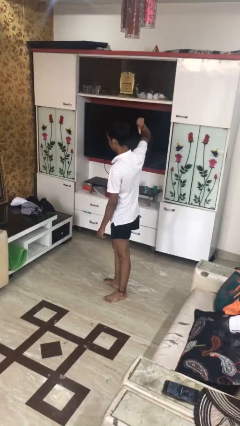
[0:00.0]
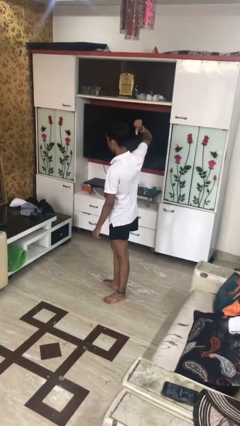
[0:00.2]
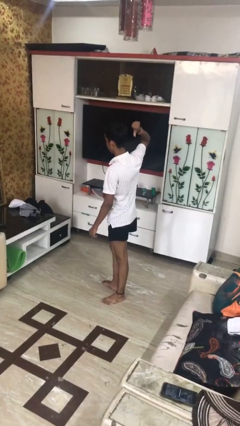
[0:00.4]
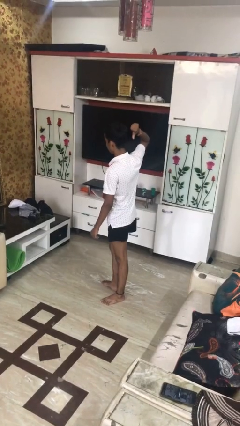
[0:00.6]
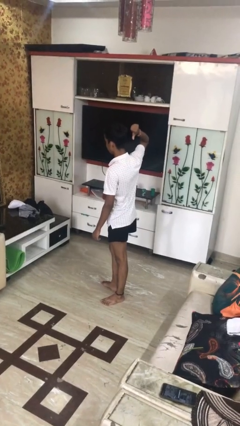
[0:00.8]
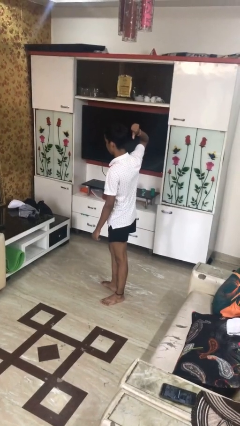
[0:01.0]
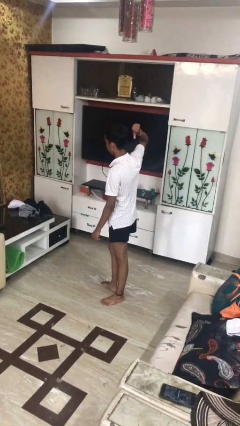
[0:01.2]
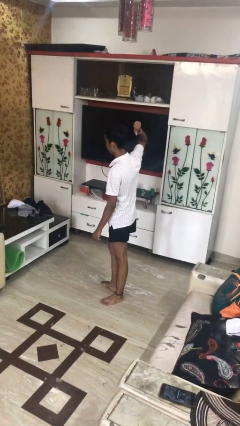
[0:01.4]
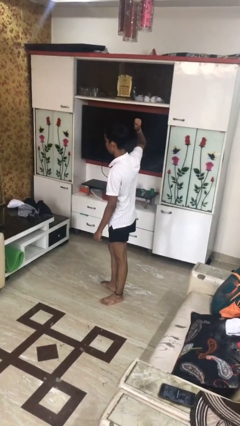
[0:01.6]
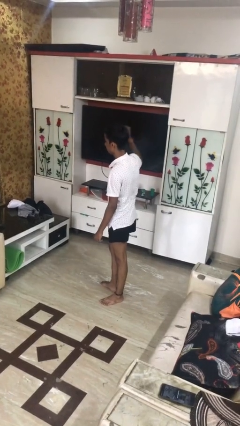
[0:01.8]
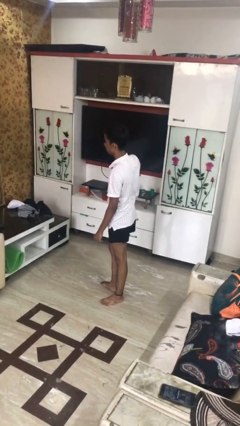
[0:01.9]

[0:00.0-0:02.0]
person gestures behind me

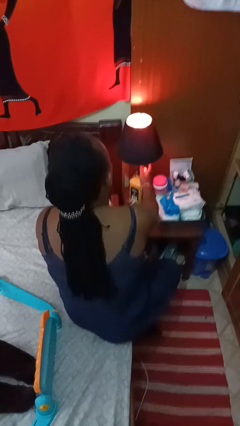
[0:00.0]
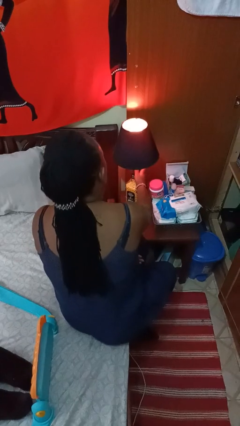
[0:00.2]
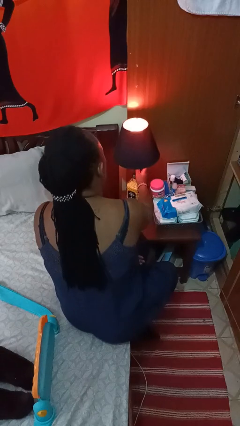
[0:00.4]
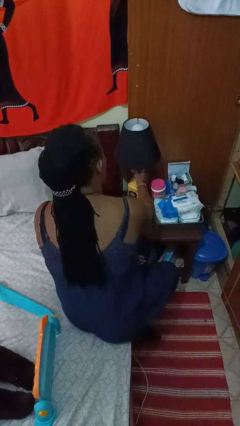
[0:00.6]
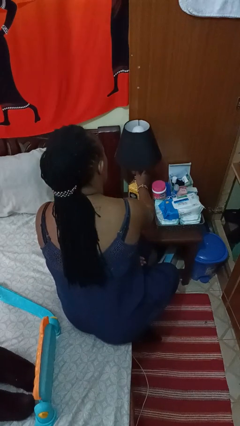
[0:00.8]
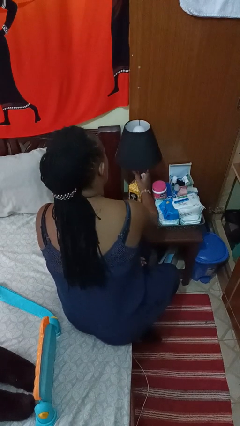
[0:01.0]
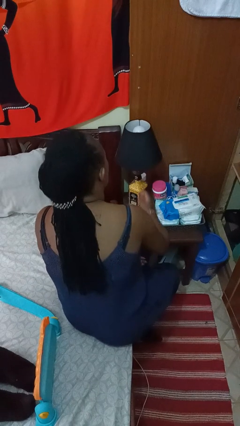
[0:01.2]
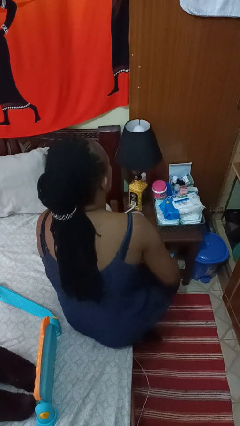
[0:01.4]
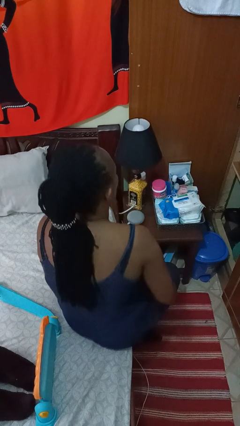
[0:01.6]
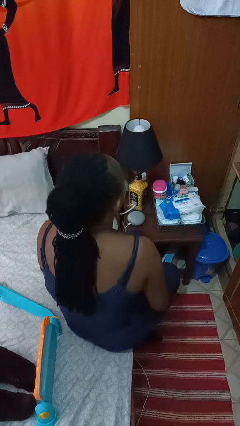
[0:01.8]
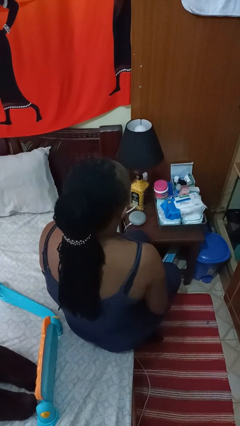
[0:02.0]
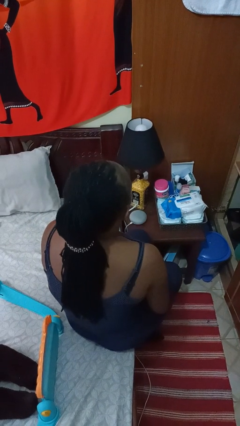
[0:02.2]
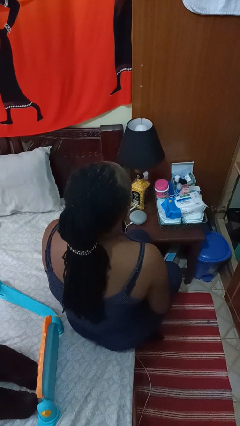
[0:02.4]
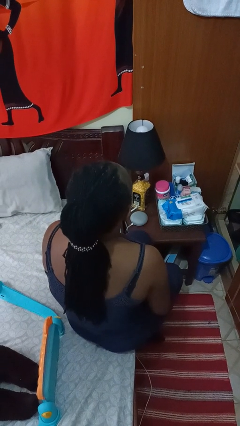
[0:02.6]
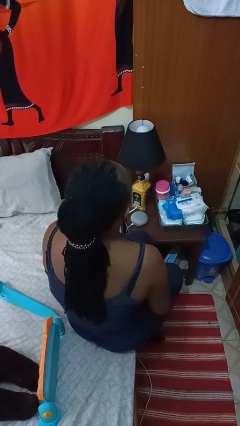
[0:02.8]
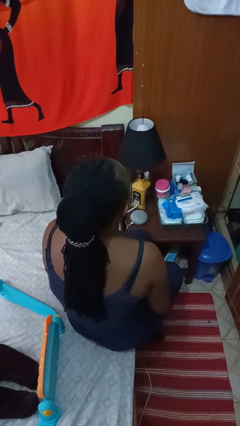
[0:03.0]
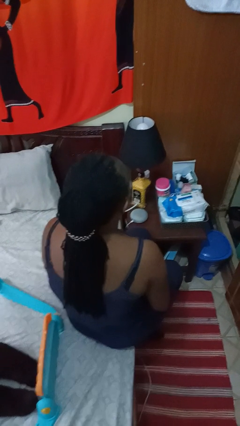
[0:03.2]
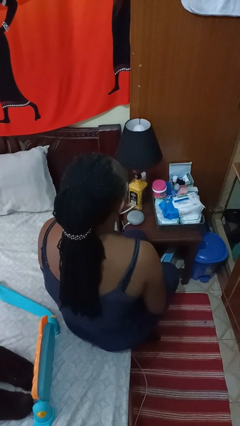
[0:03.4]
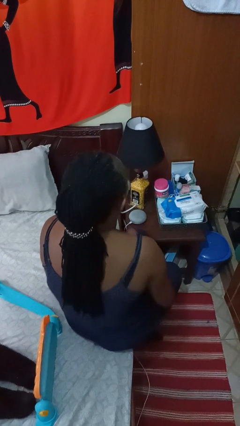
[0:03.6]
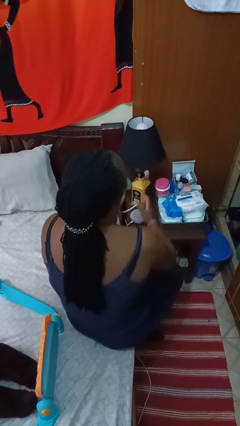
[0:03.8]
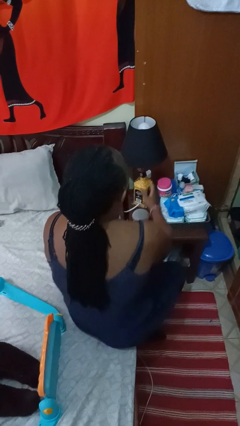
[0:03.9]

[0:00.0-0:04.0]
person turns off lamp

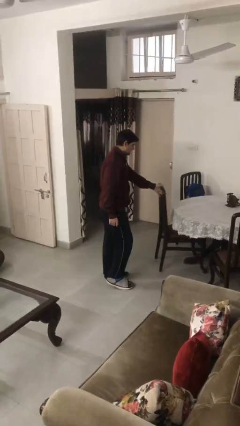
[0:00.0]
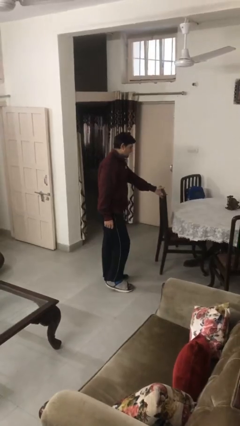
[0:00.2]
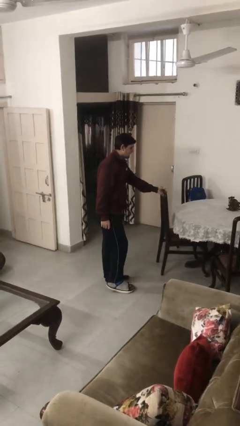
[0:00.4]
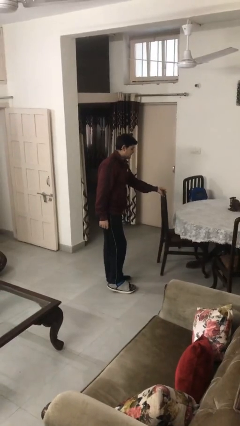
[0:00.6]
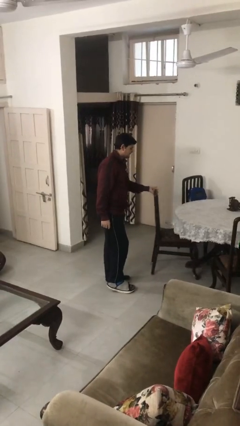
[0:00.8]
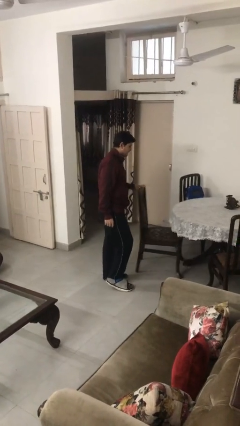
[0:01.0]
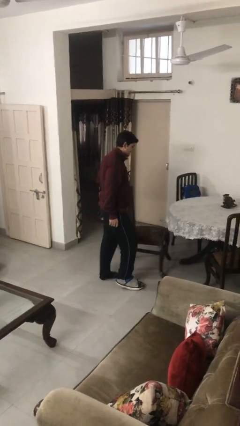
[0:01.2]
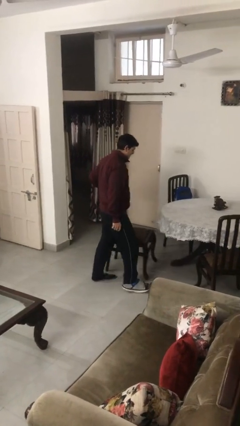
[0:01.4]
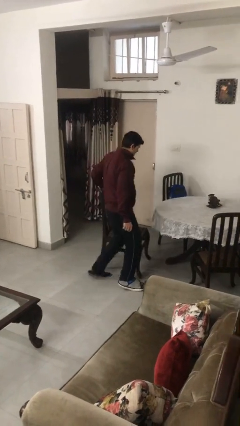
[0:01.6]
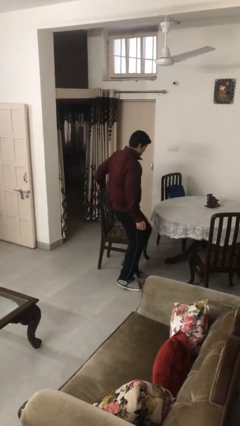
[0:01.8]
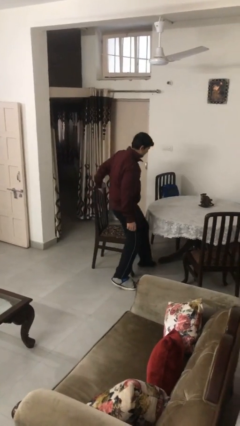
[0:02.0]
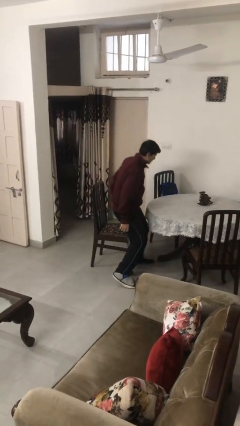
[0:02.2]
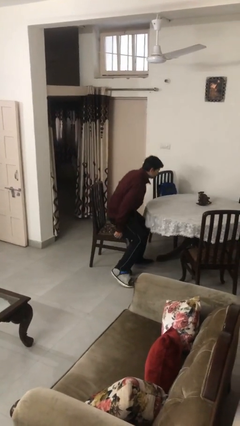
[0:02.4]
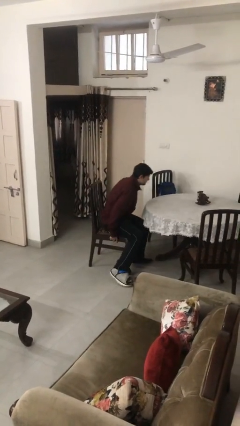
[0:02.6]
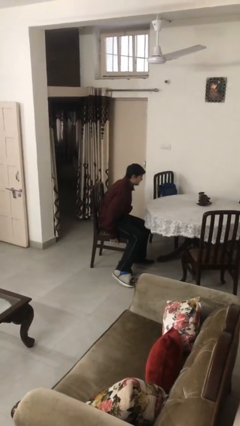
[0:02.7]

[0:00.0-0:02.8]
person sits down

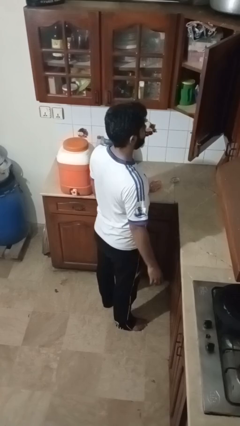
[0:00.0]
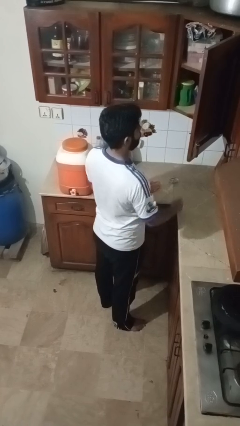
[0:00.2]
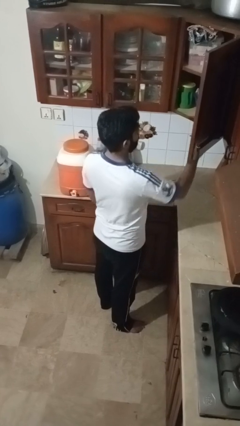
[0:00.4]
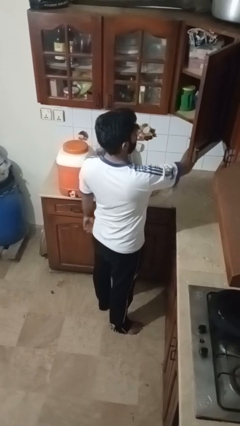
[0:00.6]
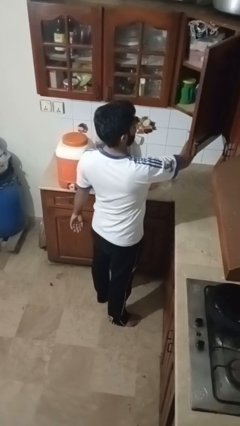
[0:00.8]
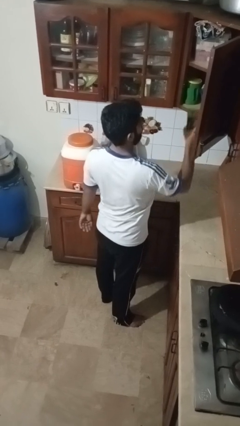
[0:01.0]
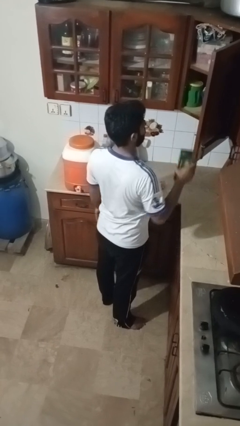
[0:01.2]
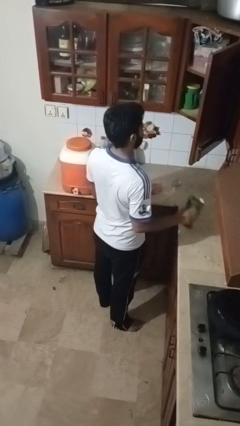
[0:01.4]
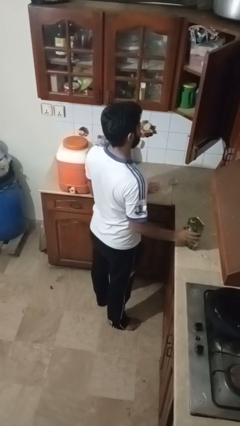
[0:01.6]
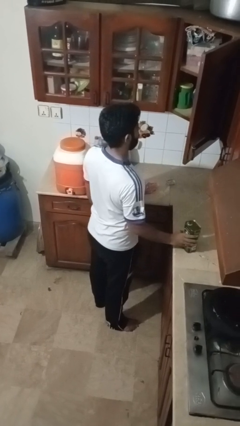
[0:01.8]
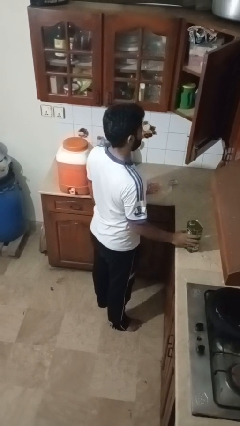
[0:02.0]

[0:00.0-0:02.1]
person takes object from cabinet

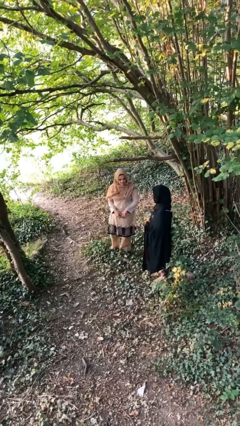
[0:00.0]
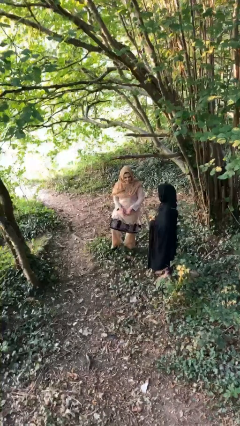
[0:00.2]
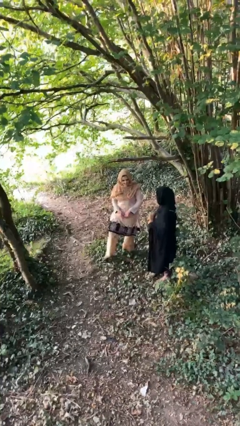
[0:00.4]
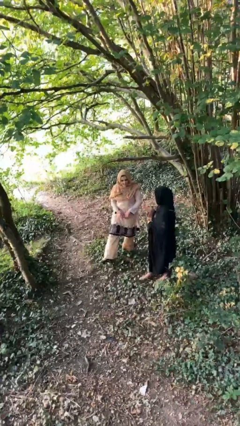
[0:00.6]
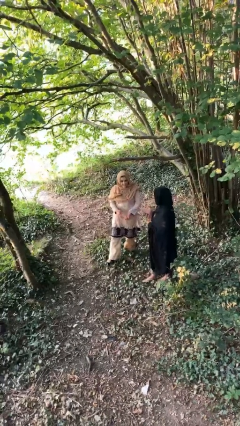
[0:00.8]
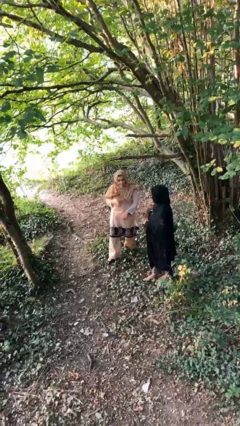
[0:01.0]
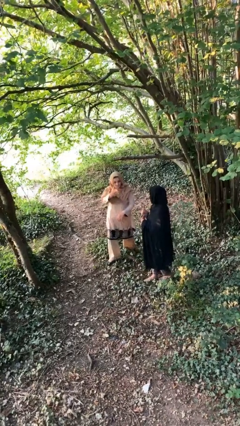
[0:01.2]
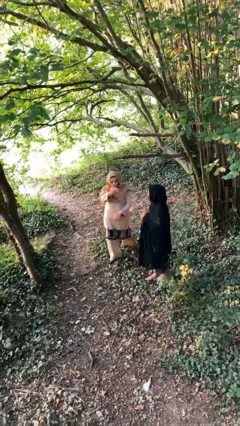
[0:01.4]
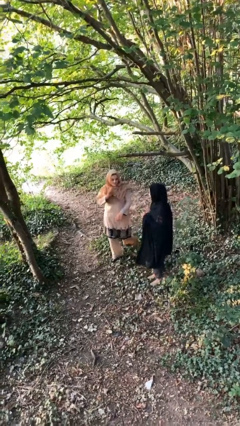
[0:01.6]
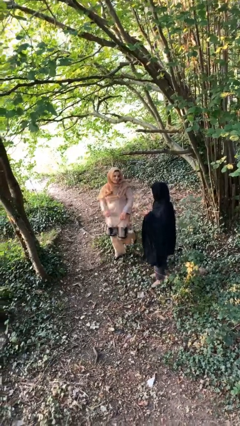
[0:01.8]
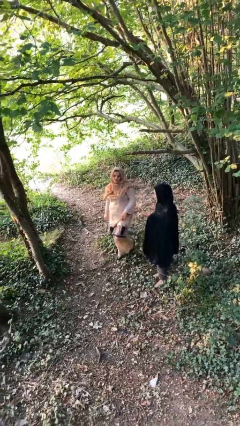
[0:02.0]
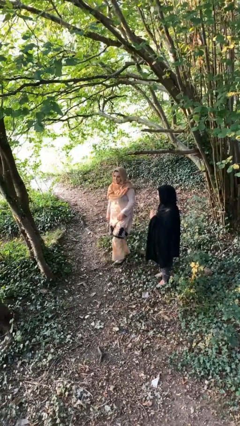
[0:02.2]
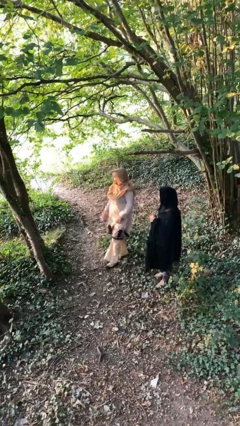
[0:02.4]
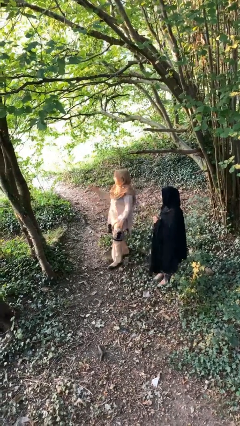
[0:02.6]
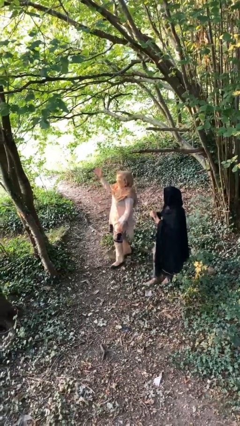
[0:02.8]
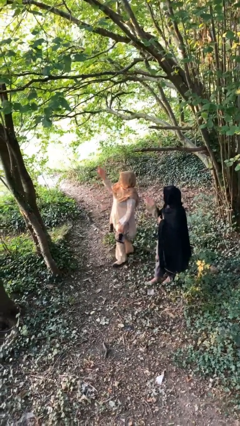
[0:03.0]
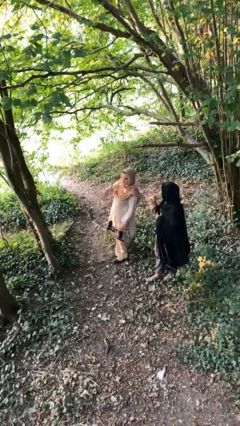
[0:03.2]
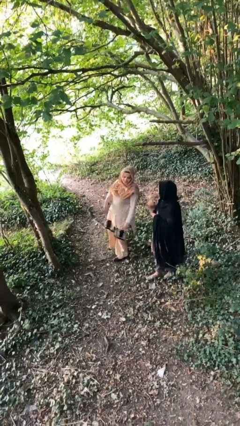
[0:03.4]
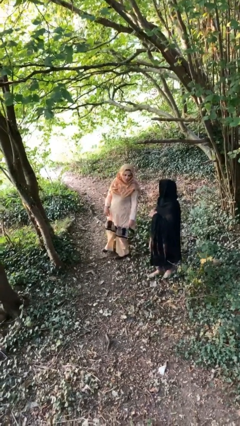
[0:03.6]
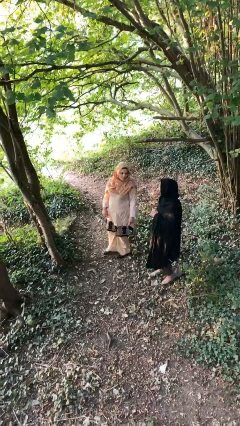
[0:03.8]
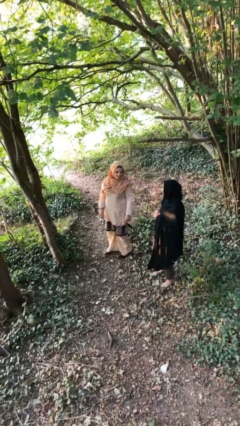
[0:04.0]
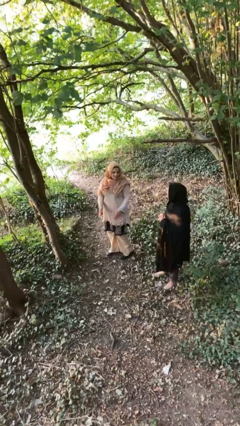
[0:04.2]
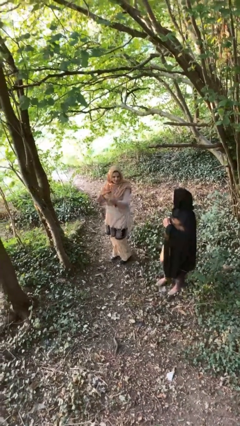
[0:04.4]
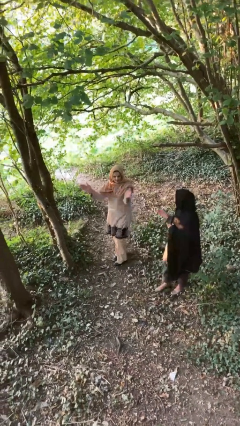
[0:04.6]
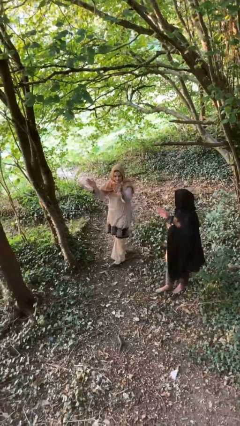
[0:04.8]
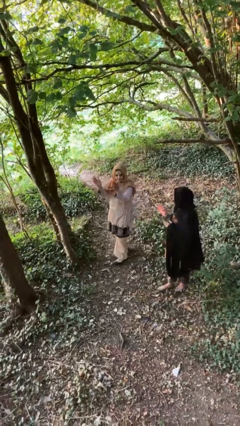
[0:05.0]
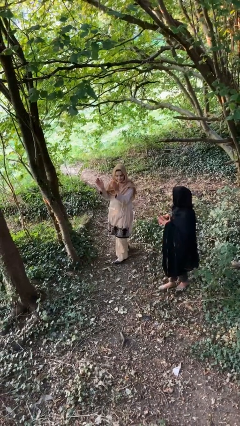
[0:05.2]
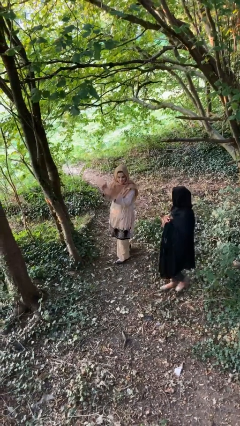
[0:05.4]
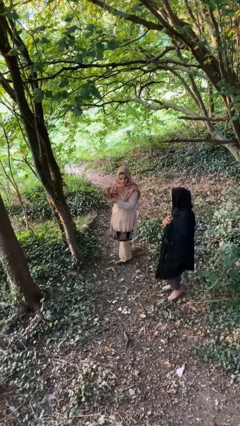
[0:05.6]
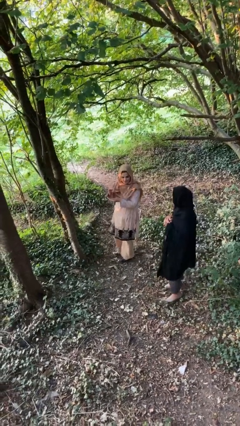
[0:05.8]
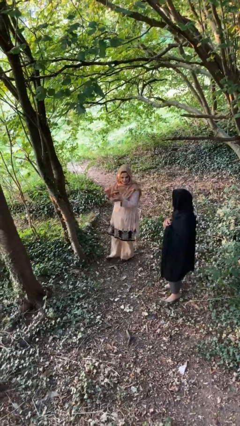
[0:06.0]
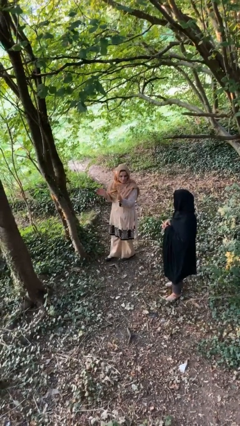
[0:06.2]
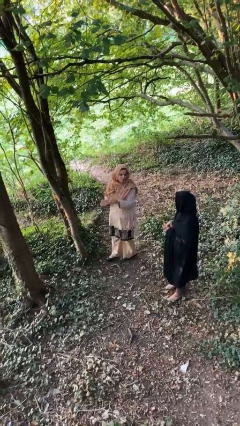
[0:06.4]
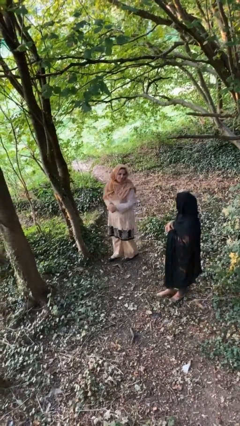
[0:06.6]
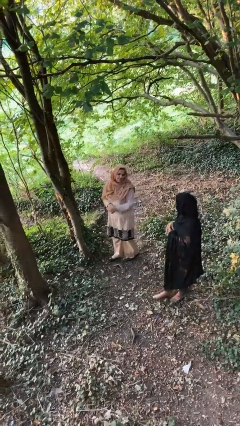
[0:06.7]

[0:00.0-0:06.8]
person talks to person

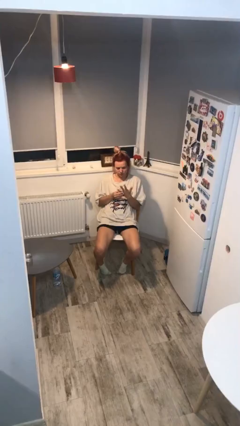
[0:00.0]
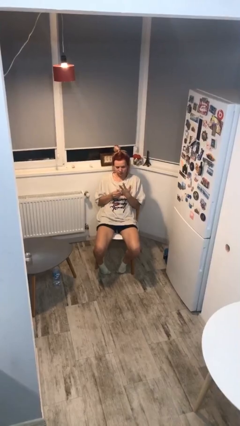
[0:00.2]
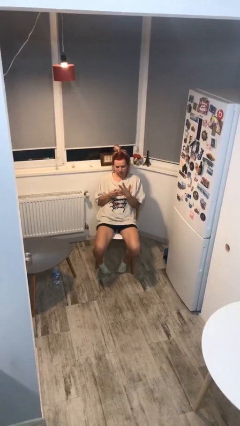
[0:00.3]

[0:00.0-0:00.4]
person takes off ring
